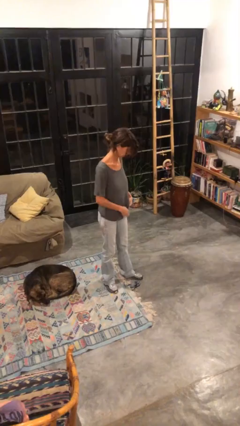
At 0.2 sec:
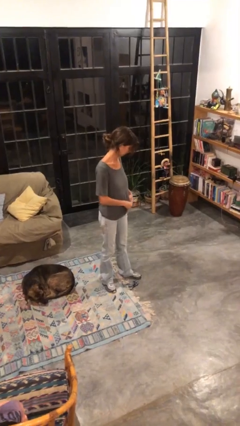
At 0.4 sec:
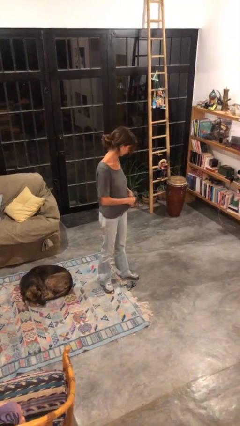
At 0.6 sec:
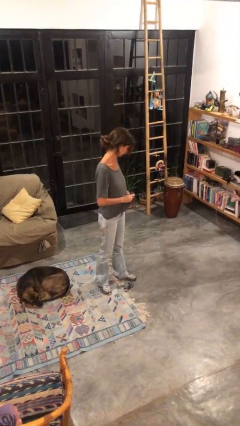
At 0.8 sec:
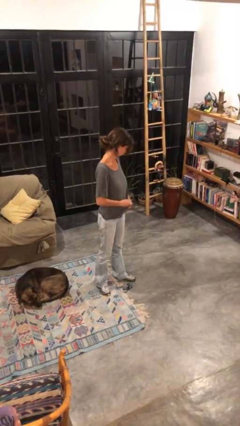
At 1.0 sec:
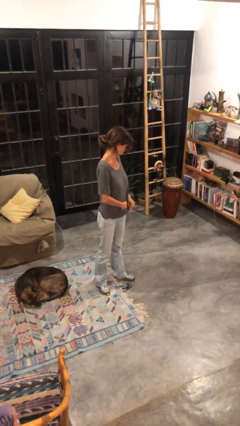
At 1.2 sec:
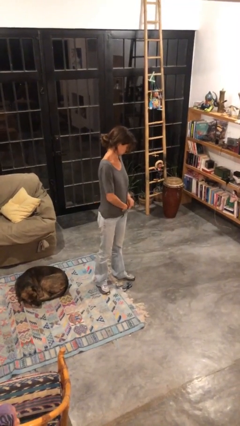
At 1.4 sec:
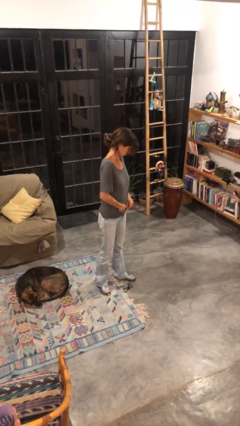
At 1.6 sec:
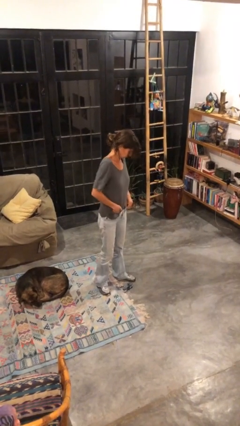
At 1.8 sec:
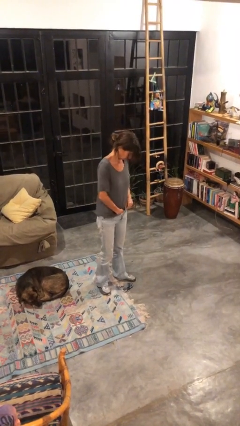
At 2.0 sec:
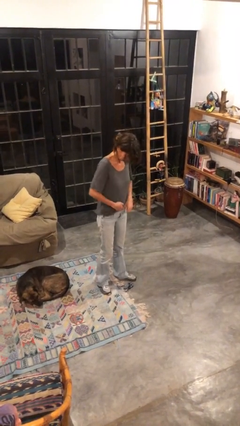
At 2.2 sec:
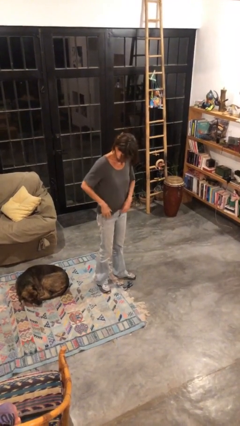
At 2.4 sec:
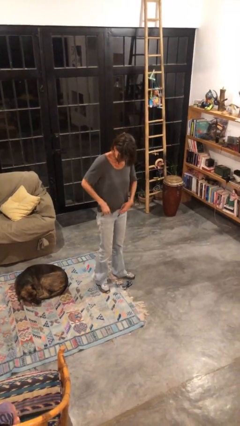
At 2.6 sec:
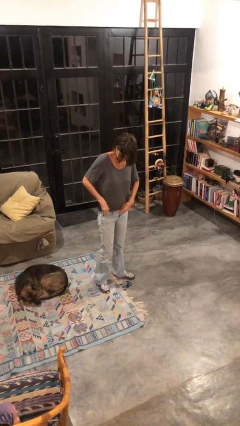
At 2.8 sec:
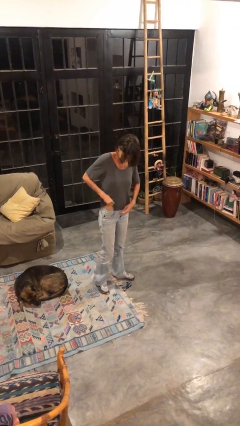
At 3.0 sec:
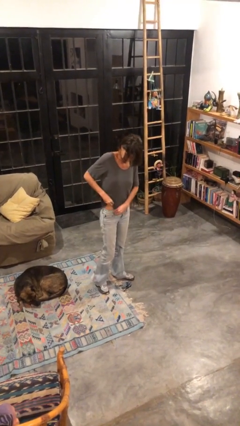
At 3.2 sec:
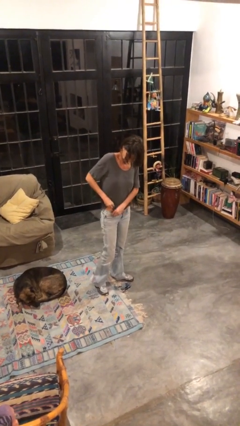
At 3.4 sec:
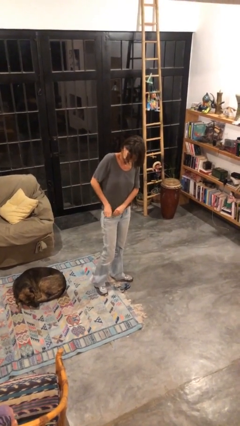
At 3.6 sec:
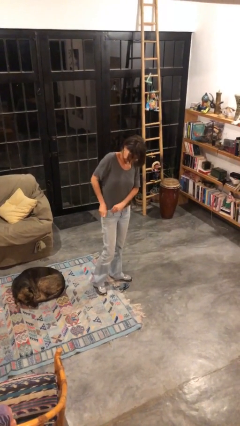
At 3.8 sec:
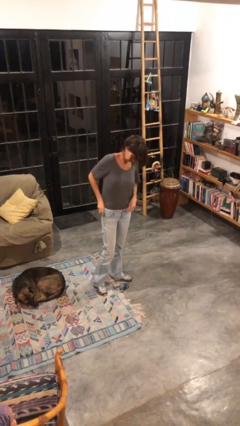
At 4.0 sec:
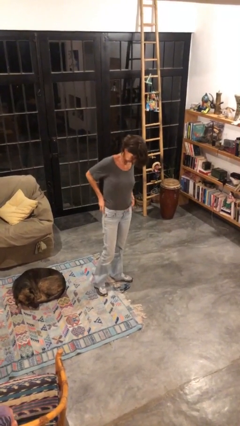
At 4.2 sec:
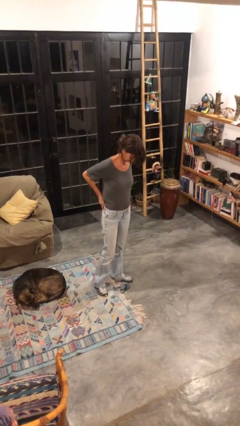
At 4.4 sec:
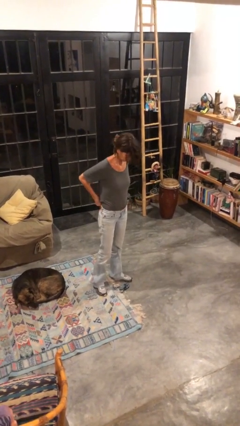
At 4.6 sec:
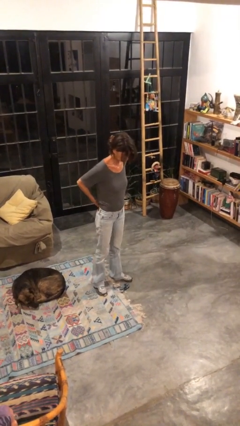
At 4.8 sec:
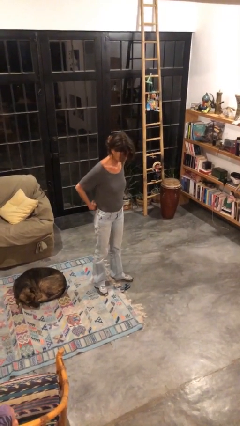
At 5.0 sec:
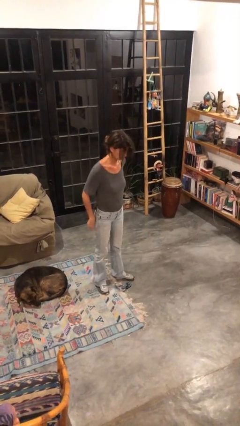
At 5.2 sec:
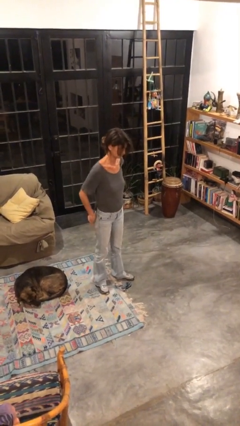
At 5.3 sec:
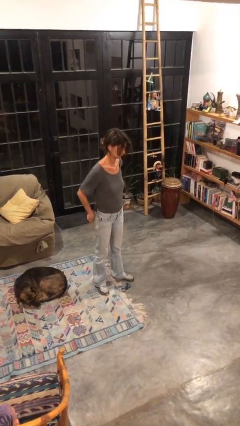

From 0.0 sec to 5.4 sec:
person tucks in shirt

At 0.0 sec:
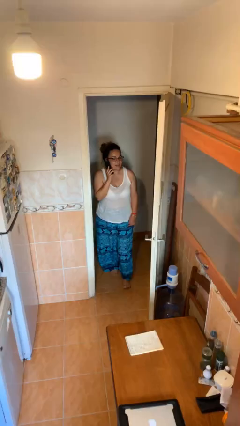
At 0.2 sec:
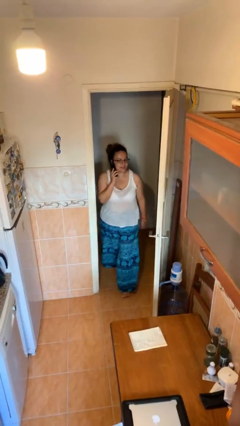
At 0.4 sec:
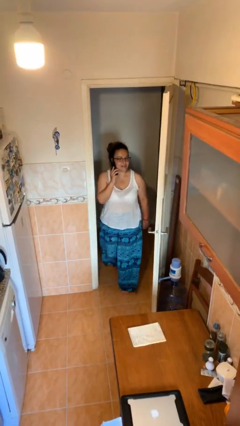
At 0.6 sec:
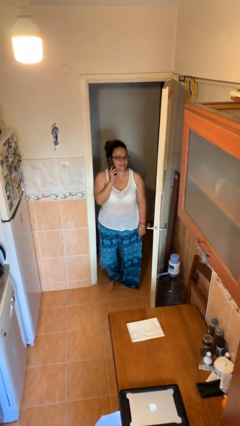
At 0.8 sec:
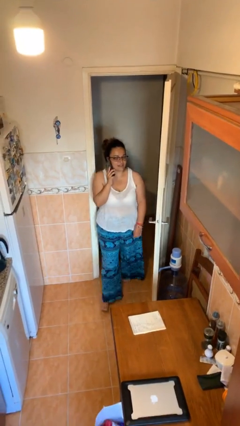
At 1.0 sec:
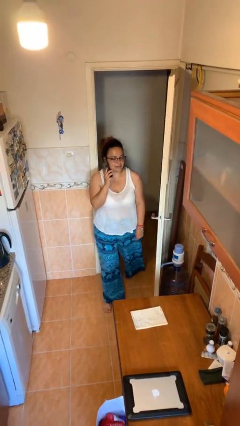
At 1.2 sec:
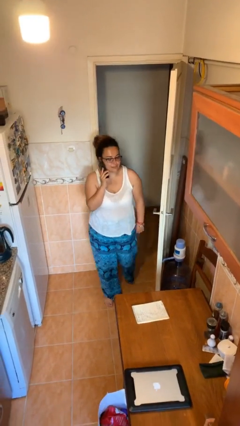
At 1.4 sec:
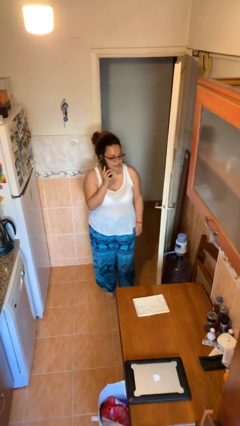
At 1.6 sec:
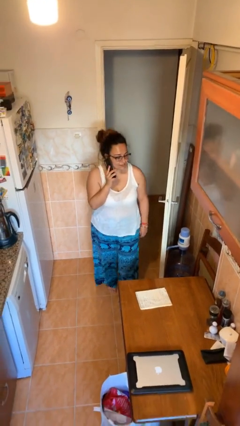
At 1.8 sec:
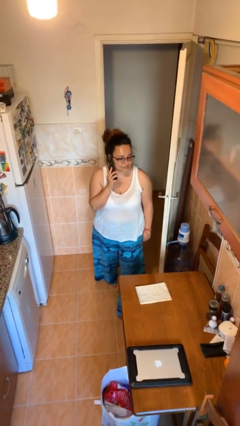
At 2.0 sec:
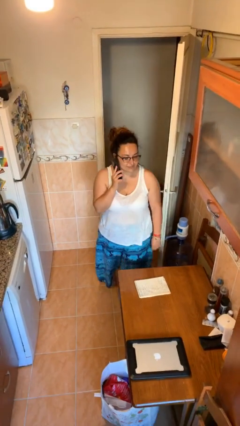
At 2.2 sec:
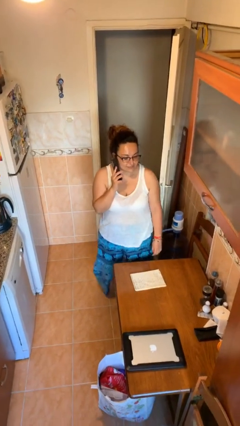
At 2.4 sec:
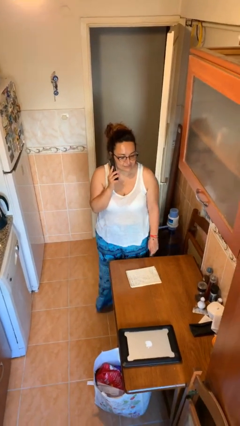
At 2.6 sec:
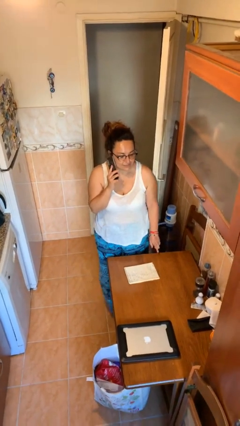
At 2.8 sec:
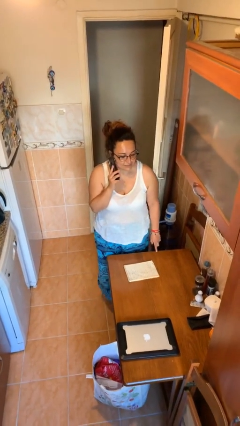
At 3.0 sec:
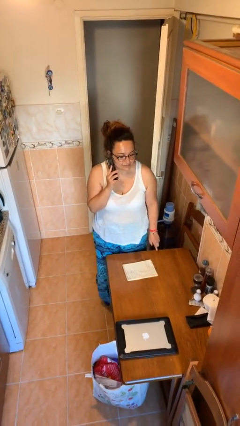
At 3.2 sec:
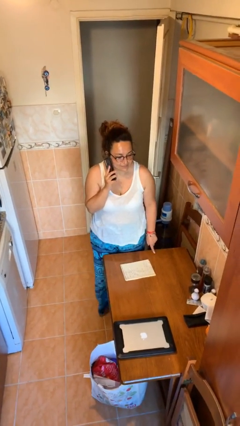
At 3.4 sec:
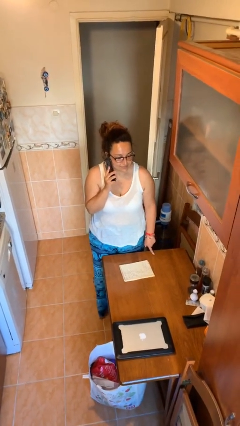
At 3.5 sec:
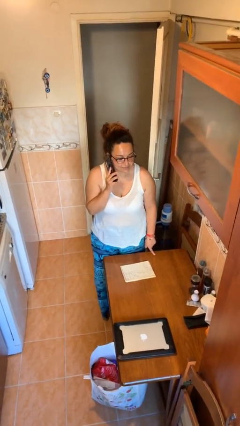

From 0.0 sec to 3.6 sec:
person enters scene through structure

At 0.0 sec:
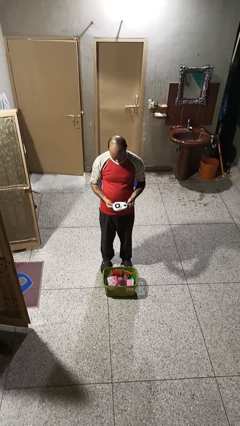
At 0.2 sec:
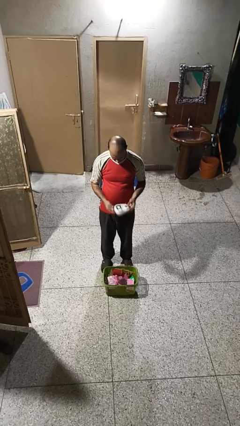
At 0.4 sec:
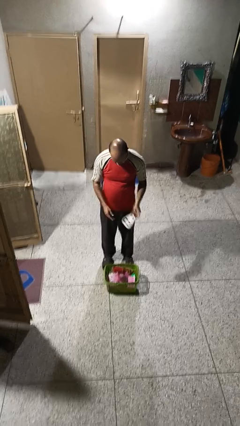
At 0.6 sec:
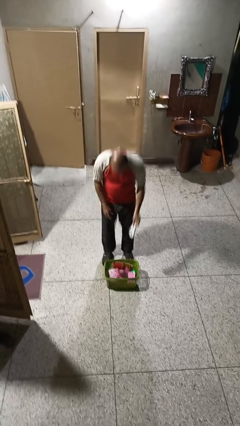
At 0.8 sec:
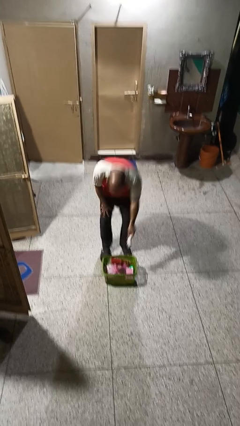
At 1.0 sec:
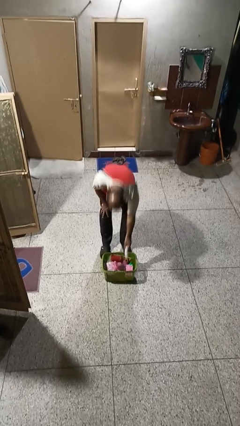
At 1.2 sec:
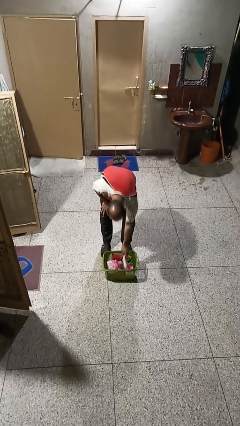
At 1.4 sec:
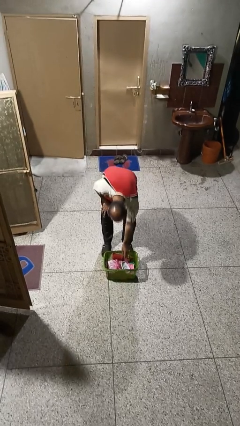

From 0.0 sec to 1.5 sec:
person puts object into basket

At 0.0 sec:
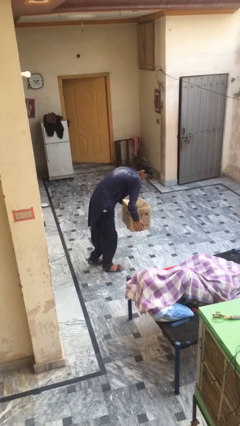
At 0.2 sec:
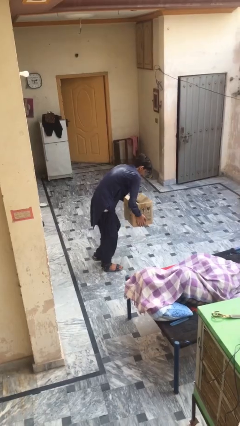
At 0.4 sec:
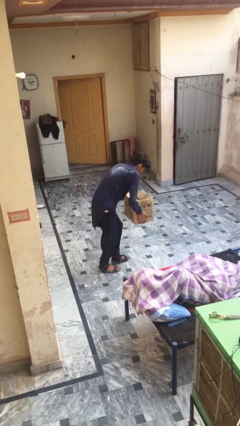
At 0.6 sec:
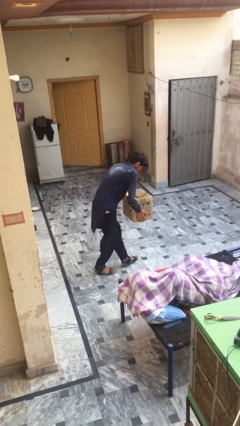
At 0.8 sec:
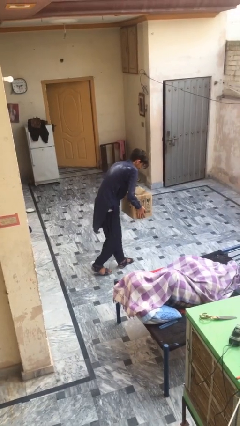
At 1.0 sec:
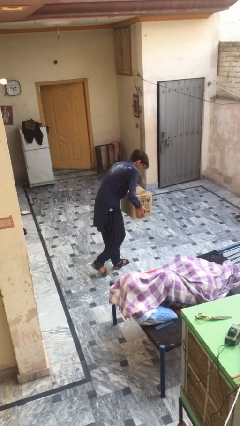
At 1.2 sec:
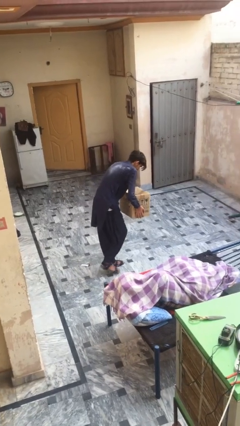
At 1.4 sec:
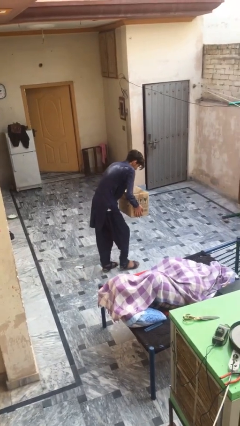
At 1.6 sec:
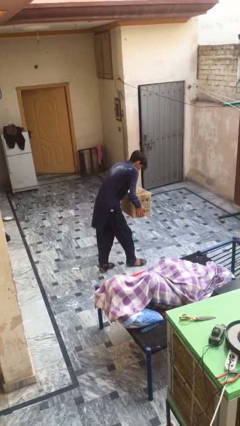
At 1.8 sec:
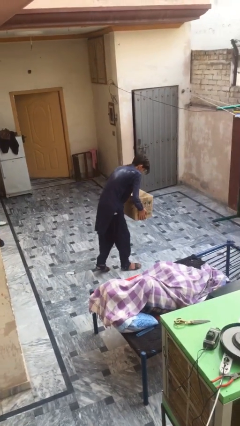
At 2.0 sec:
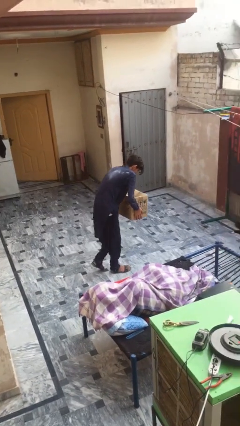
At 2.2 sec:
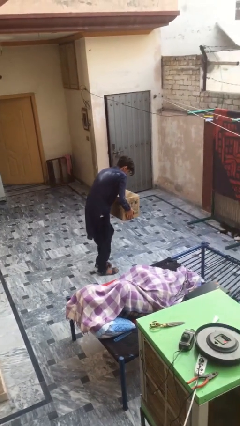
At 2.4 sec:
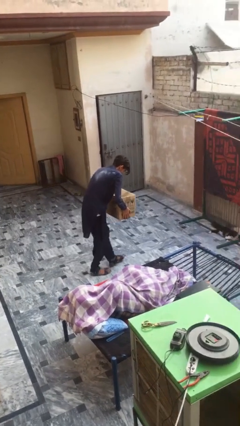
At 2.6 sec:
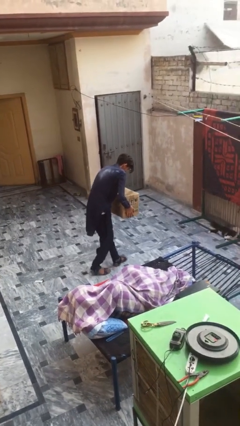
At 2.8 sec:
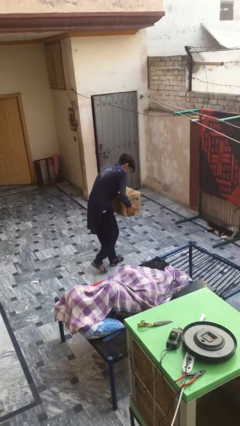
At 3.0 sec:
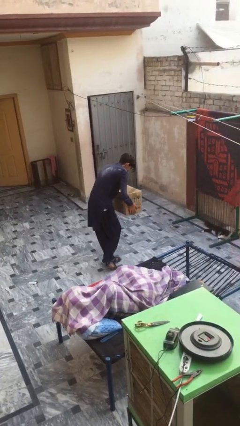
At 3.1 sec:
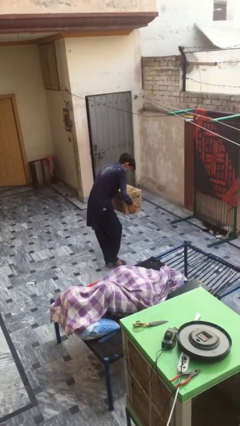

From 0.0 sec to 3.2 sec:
person carries heavy object

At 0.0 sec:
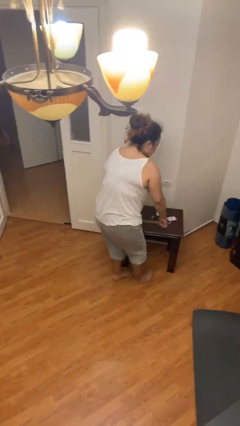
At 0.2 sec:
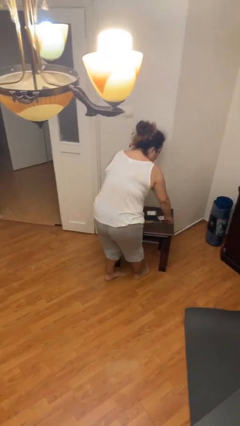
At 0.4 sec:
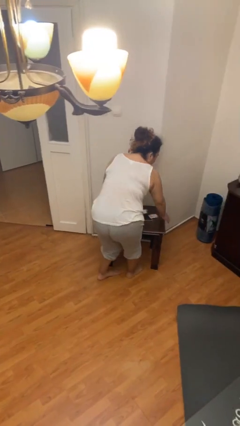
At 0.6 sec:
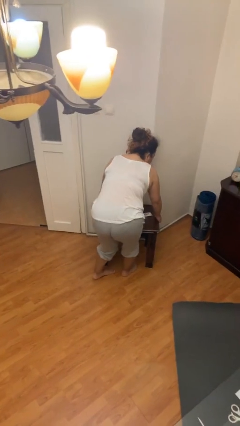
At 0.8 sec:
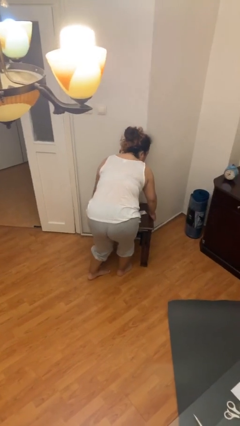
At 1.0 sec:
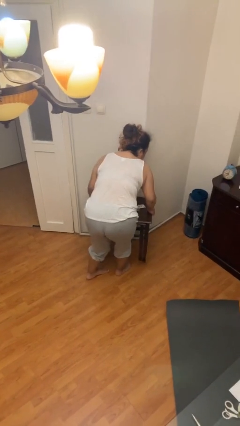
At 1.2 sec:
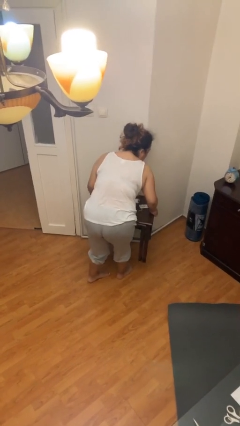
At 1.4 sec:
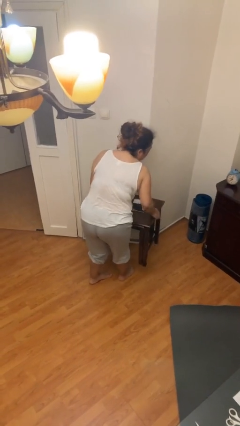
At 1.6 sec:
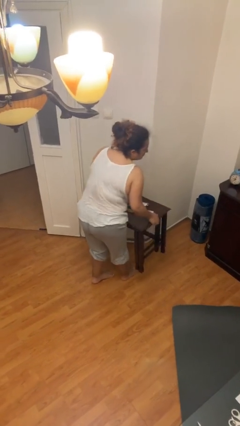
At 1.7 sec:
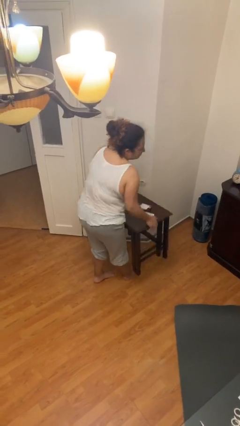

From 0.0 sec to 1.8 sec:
person picks up object from floor

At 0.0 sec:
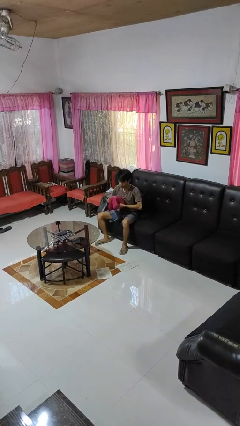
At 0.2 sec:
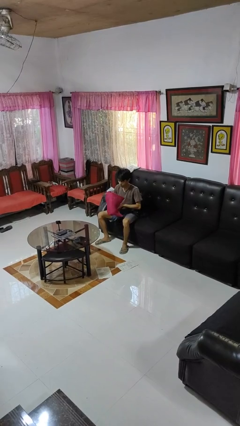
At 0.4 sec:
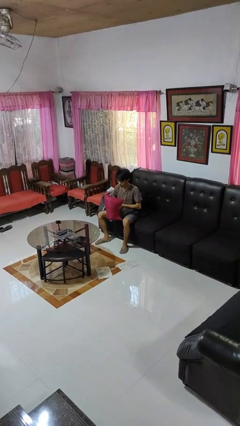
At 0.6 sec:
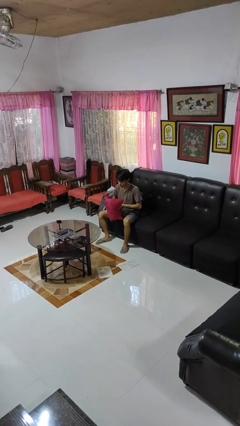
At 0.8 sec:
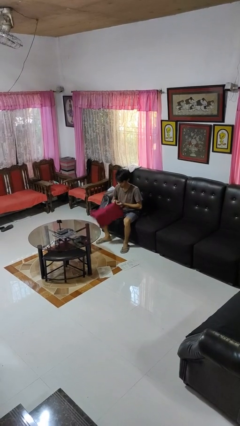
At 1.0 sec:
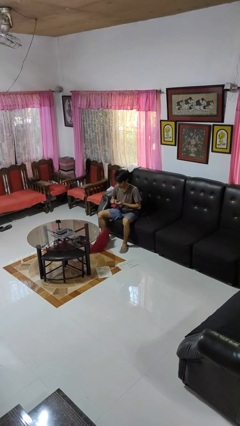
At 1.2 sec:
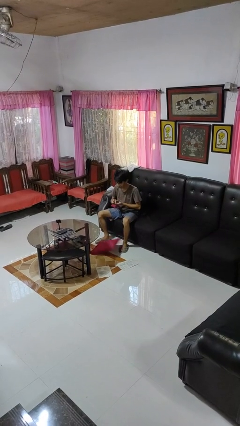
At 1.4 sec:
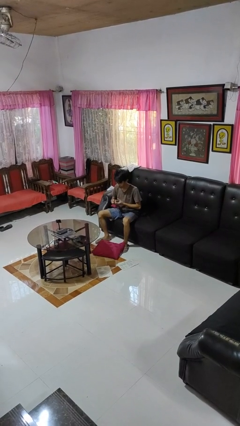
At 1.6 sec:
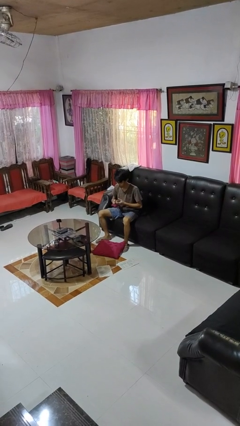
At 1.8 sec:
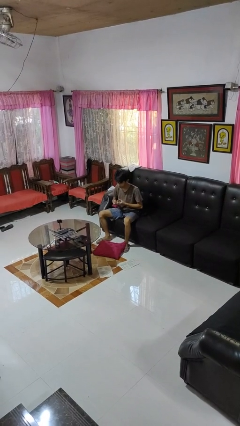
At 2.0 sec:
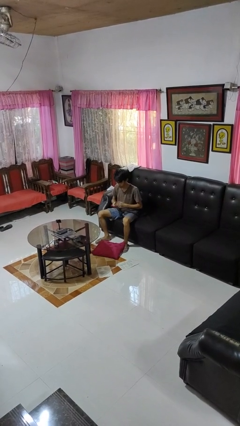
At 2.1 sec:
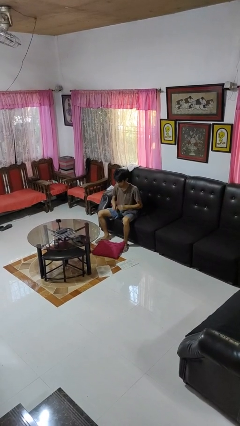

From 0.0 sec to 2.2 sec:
person drops object
